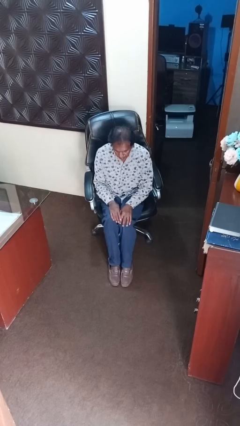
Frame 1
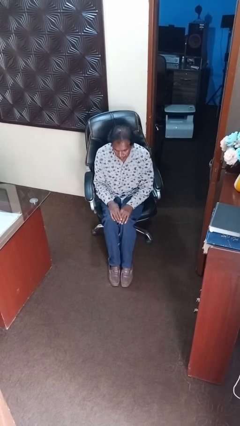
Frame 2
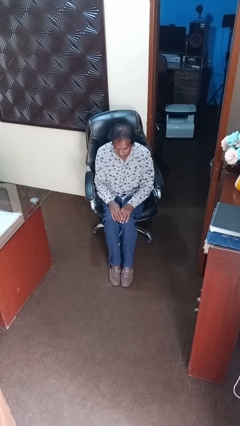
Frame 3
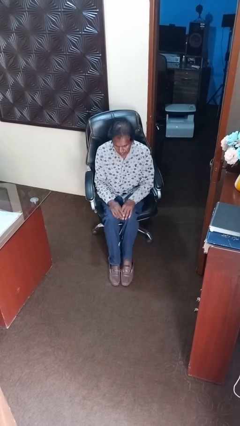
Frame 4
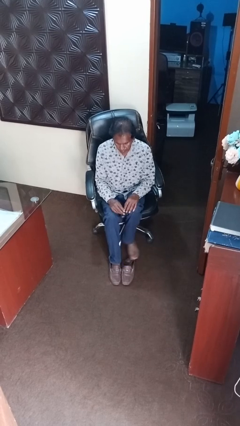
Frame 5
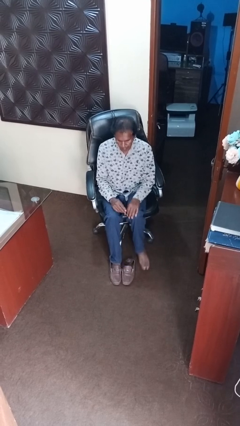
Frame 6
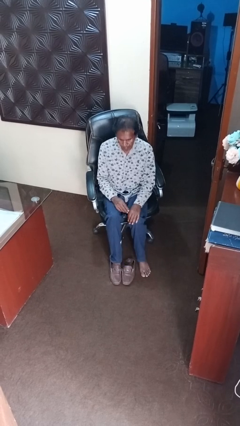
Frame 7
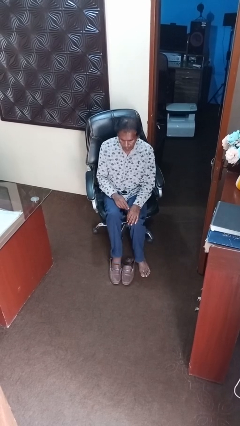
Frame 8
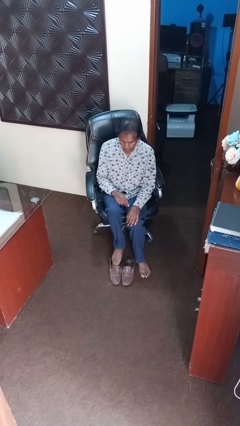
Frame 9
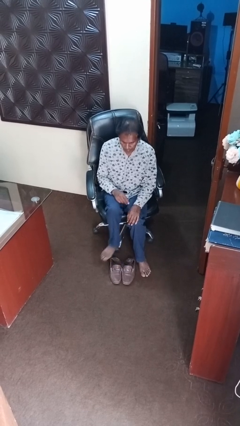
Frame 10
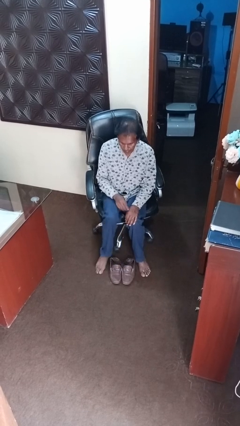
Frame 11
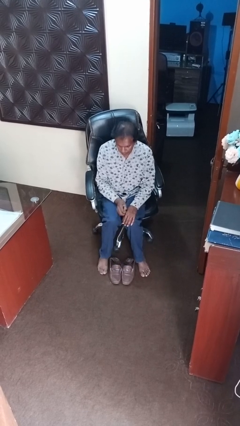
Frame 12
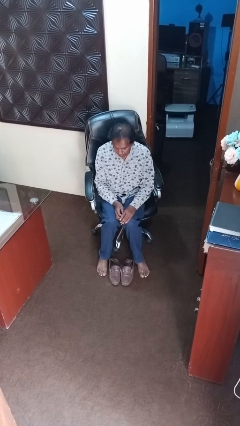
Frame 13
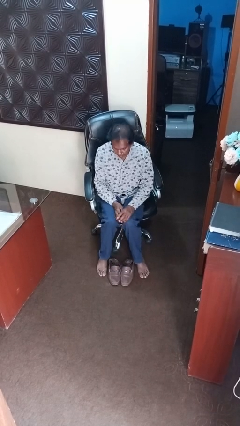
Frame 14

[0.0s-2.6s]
person takes off shoes

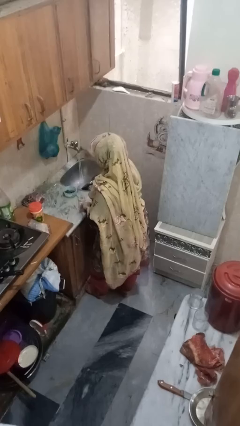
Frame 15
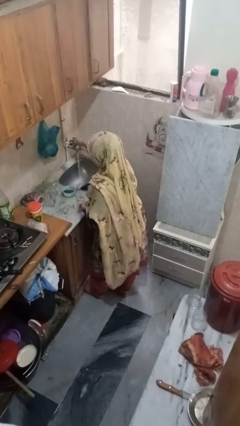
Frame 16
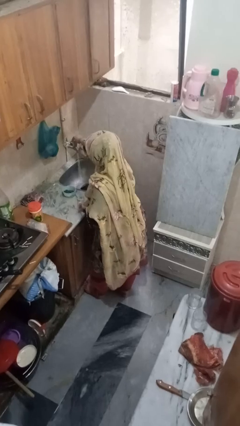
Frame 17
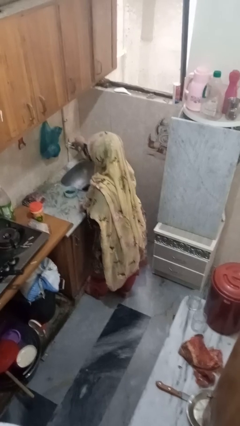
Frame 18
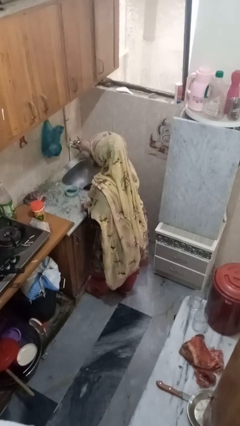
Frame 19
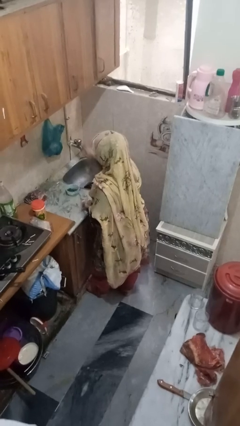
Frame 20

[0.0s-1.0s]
person turns off faucet

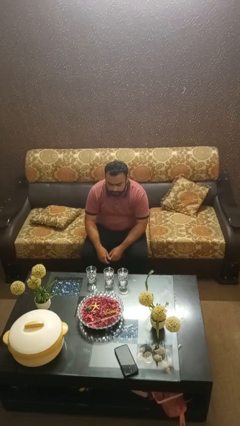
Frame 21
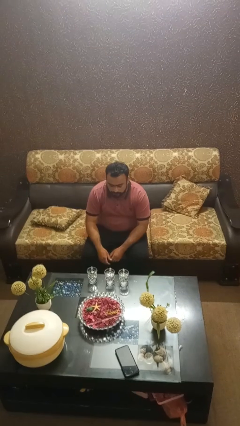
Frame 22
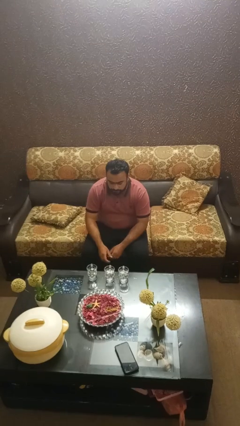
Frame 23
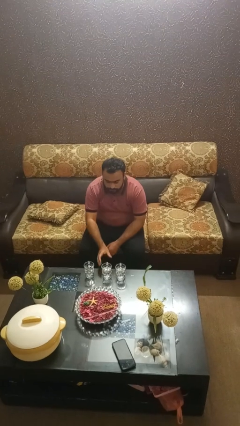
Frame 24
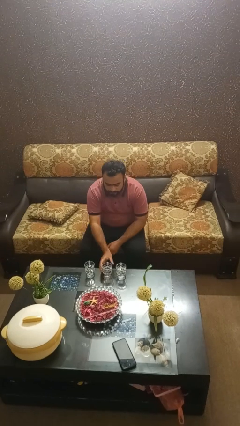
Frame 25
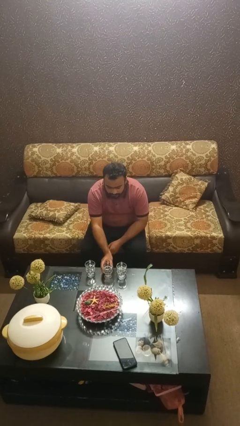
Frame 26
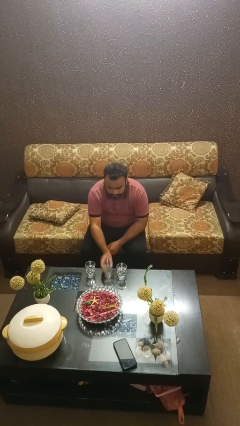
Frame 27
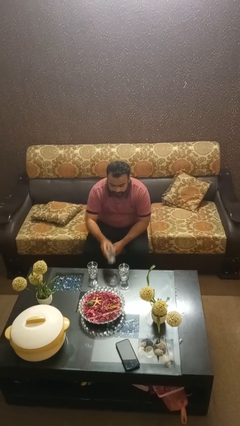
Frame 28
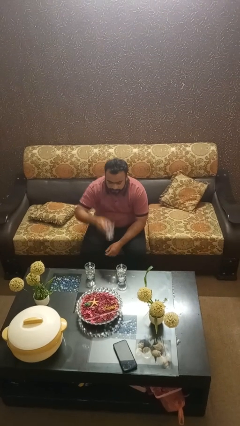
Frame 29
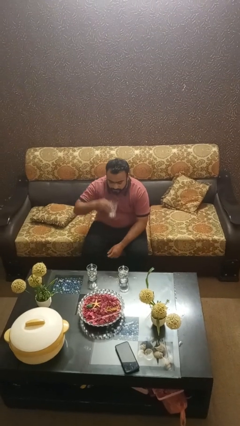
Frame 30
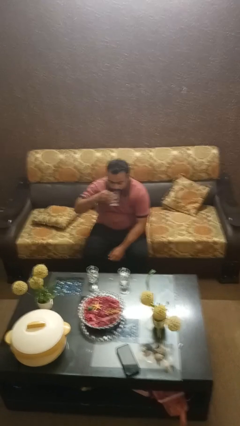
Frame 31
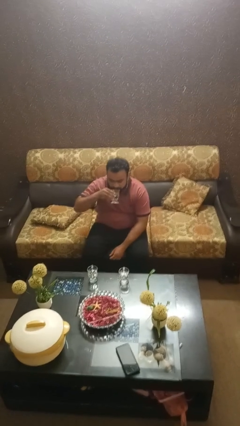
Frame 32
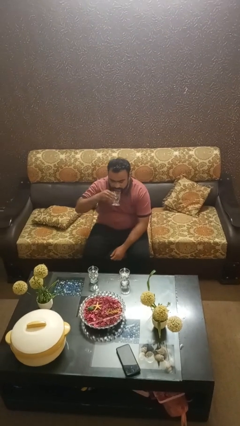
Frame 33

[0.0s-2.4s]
person picks up object from table

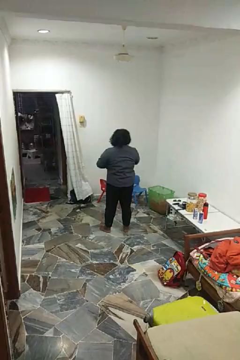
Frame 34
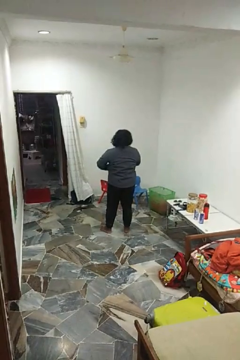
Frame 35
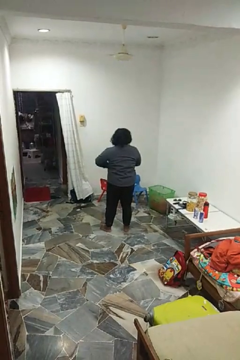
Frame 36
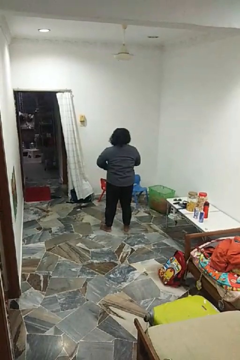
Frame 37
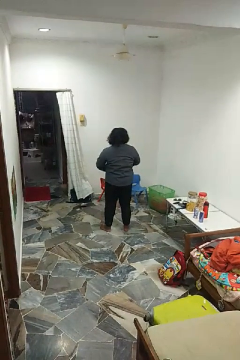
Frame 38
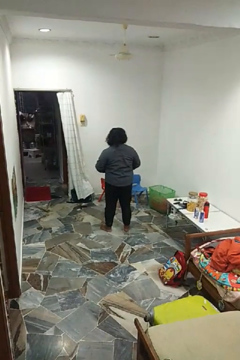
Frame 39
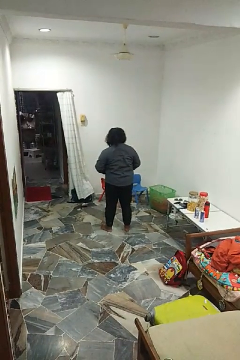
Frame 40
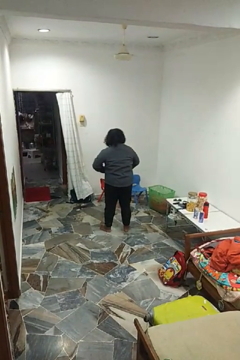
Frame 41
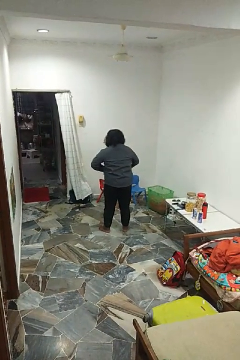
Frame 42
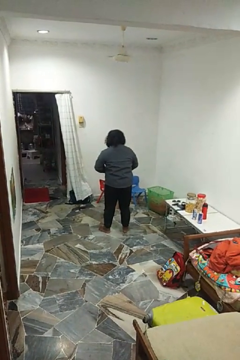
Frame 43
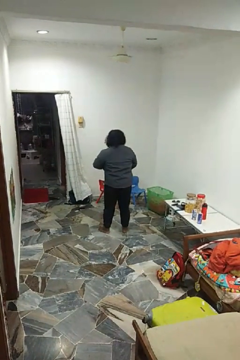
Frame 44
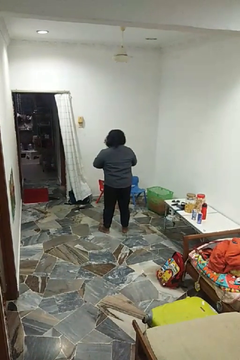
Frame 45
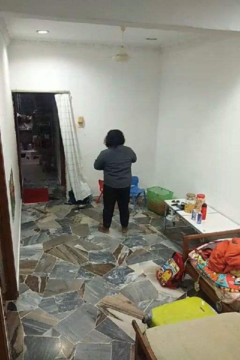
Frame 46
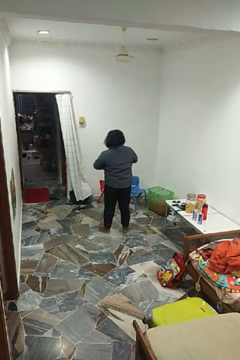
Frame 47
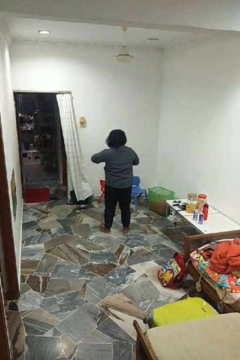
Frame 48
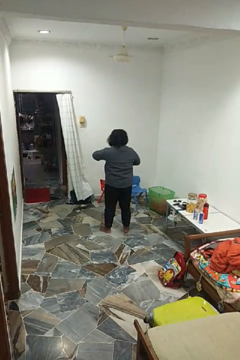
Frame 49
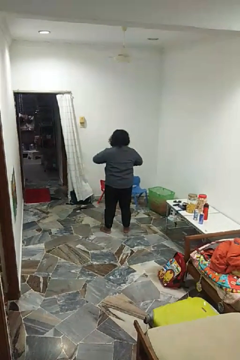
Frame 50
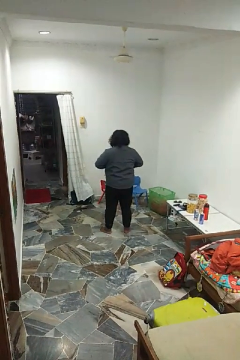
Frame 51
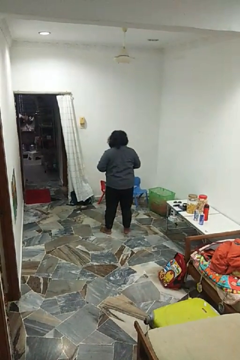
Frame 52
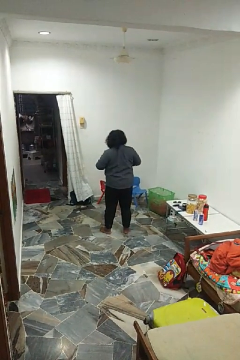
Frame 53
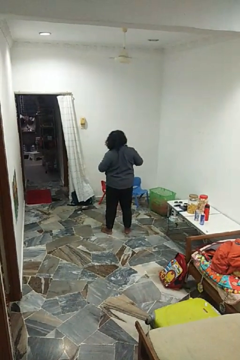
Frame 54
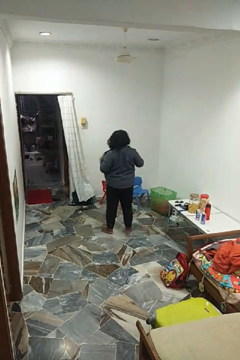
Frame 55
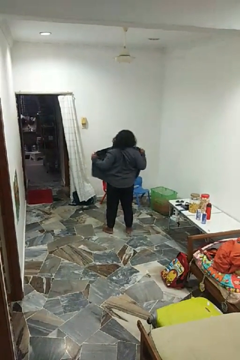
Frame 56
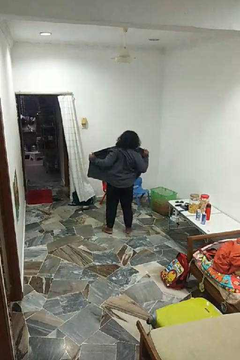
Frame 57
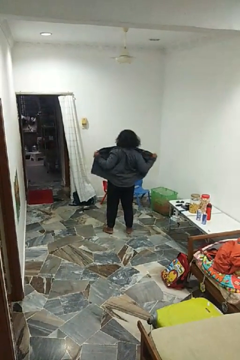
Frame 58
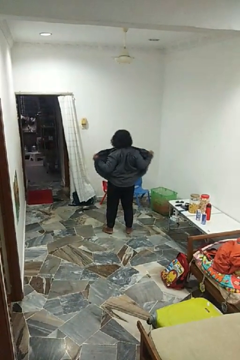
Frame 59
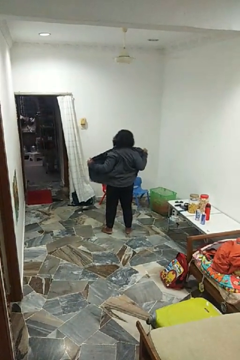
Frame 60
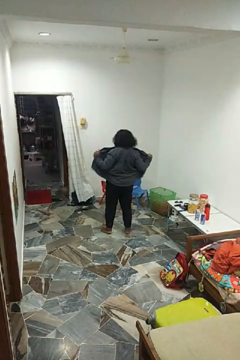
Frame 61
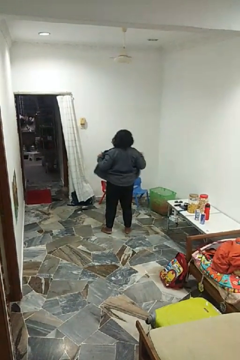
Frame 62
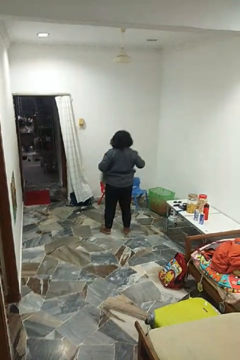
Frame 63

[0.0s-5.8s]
person unbuttons shirt

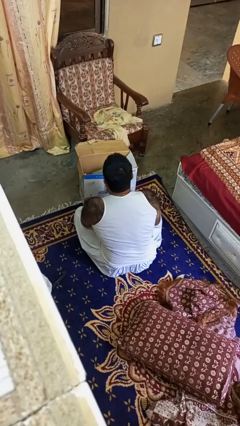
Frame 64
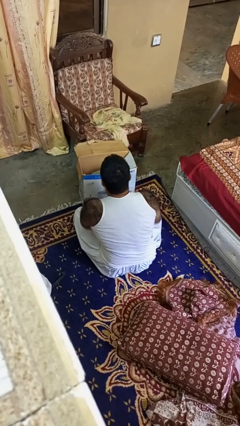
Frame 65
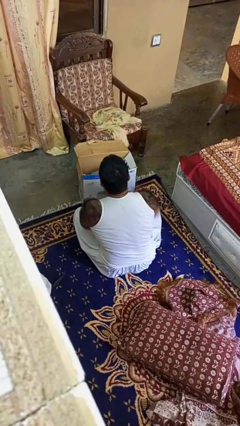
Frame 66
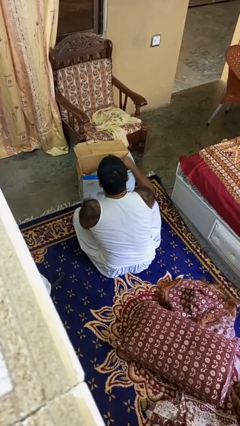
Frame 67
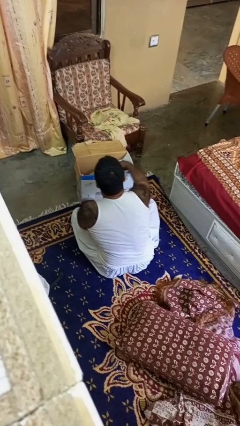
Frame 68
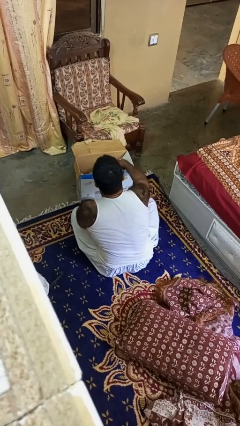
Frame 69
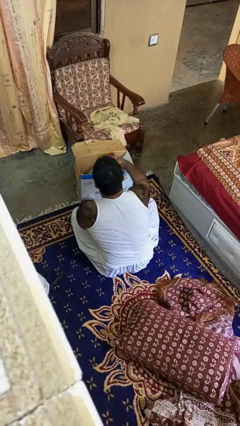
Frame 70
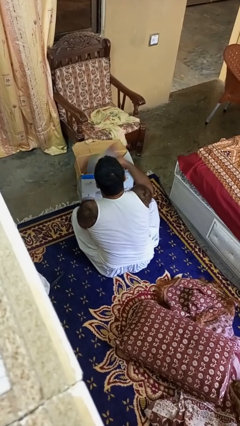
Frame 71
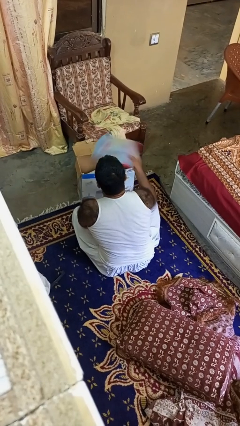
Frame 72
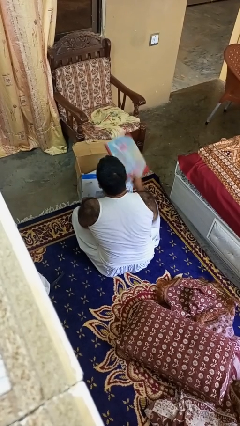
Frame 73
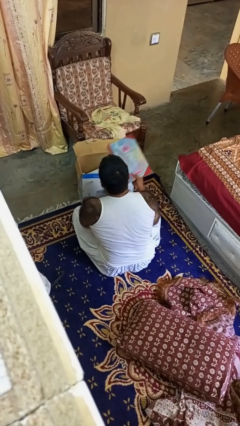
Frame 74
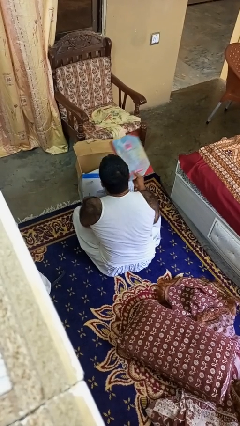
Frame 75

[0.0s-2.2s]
person takes object from box

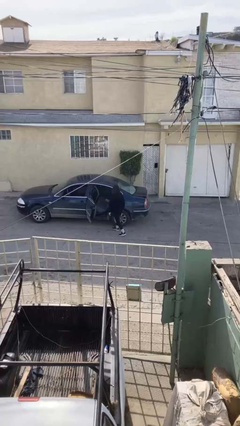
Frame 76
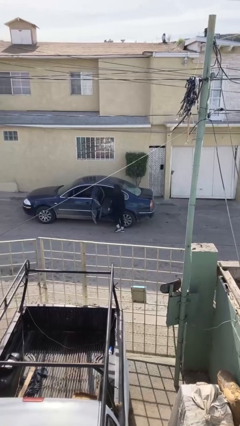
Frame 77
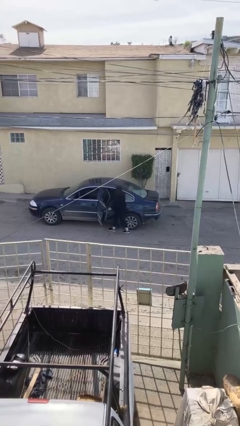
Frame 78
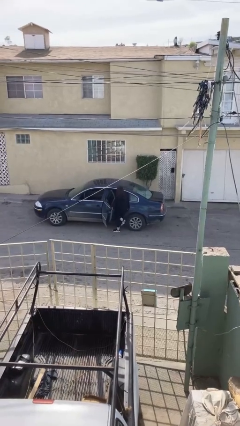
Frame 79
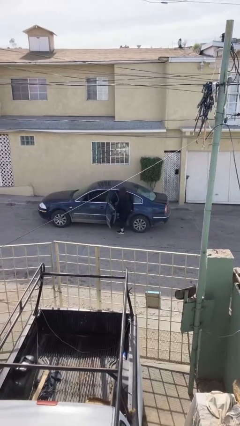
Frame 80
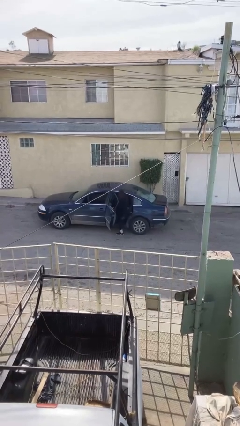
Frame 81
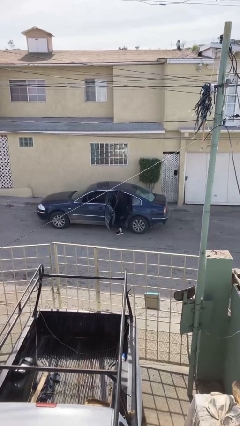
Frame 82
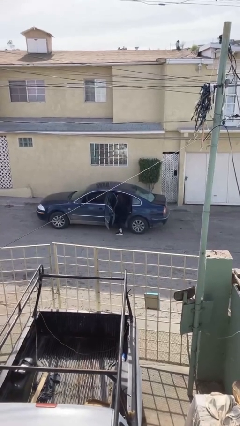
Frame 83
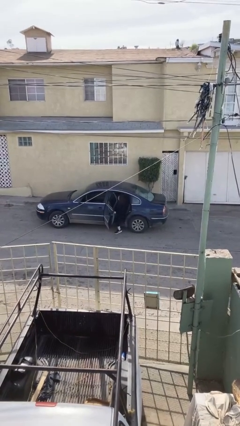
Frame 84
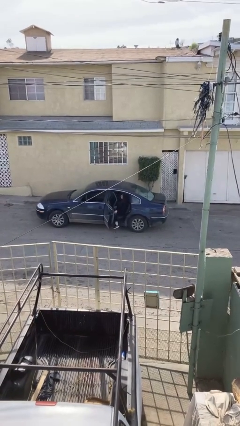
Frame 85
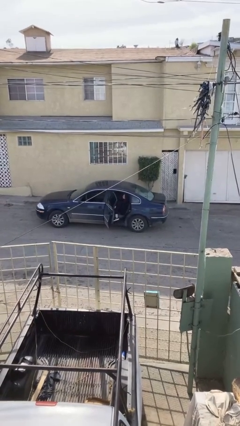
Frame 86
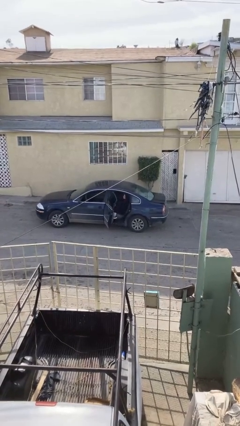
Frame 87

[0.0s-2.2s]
person enters car

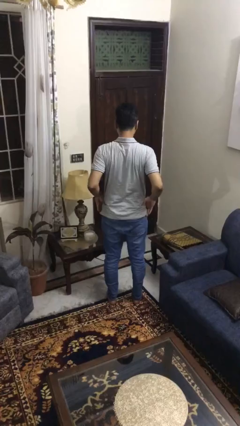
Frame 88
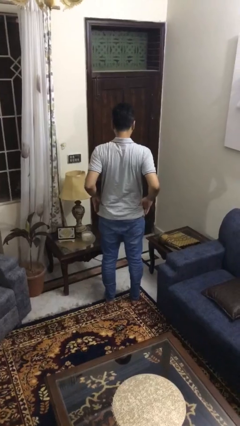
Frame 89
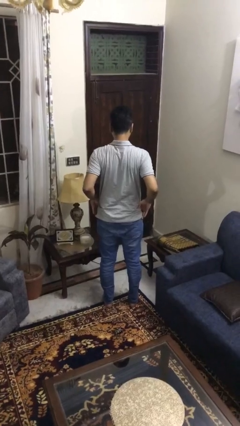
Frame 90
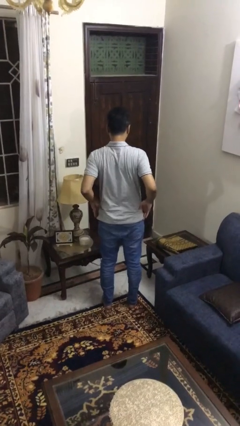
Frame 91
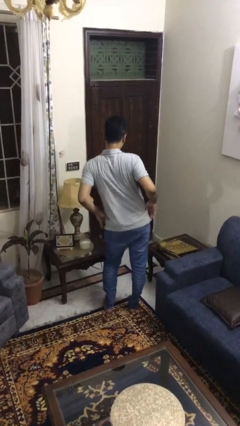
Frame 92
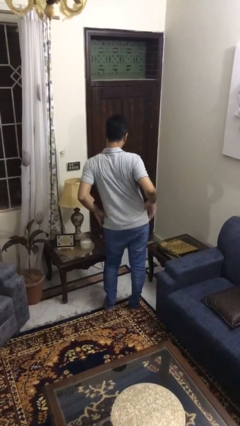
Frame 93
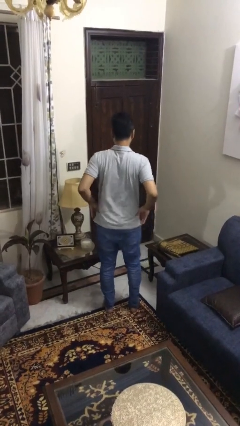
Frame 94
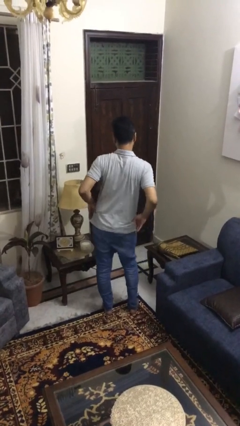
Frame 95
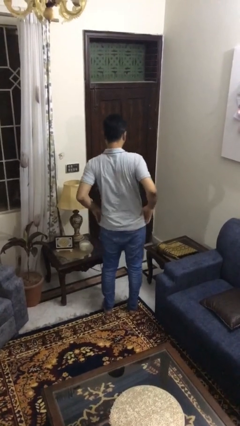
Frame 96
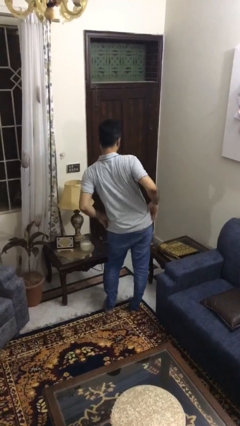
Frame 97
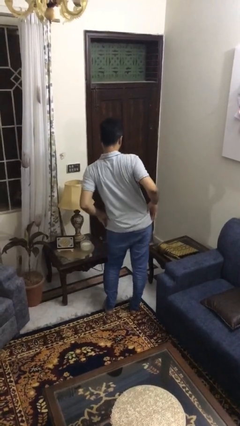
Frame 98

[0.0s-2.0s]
person wiggles hips

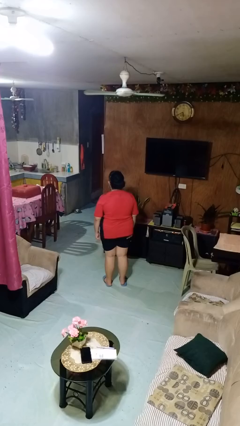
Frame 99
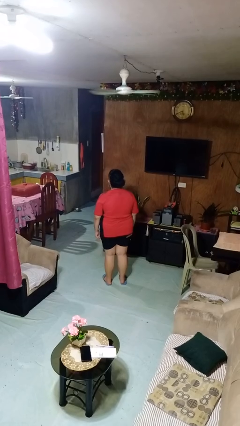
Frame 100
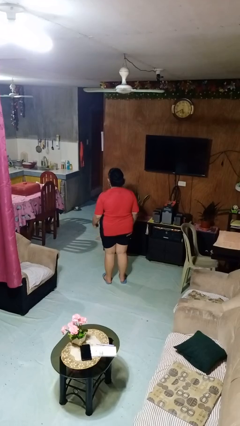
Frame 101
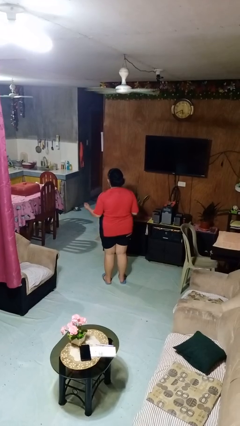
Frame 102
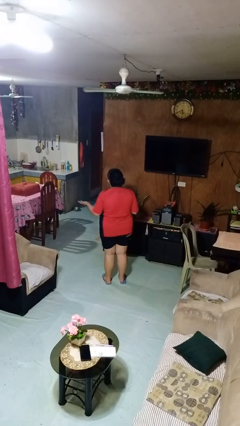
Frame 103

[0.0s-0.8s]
person shrugs
